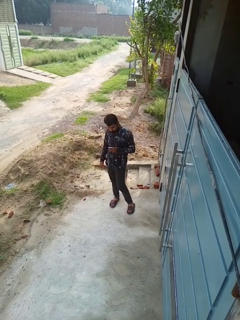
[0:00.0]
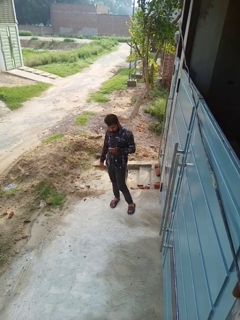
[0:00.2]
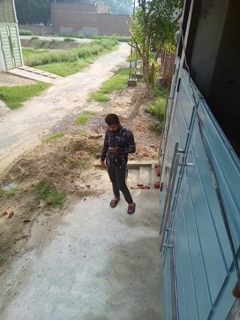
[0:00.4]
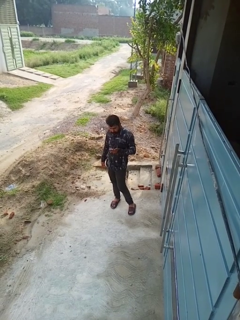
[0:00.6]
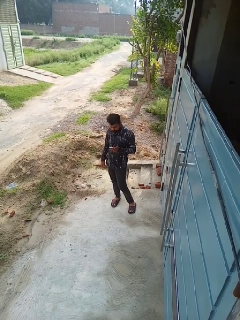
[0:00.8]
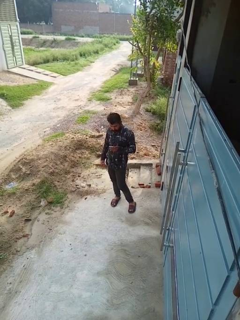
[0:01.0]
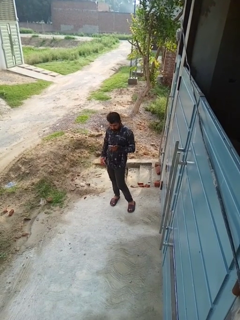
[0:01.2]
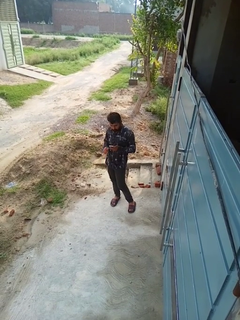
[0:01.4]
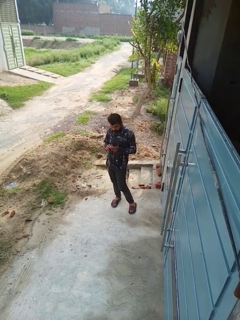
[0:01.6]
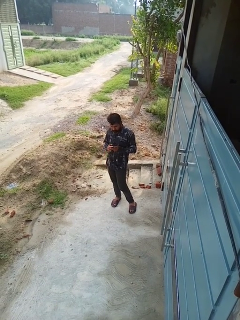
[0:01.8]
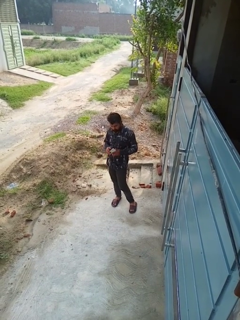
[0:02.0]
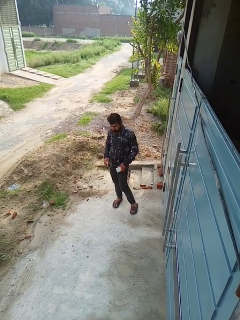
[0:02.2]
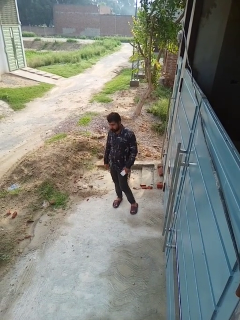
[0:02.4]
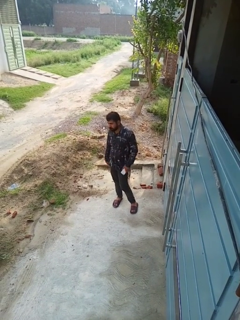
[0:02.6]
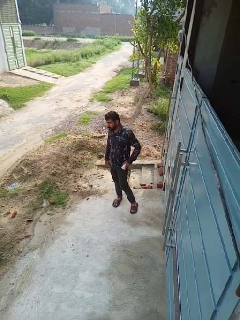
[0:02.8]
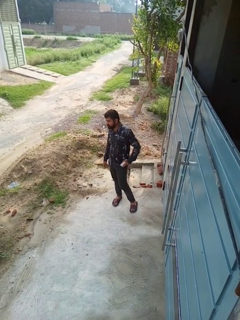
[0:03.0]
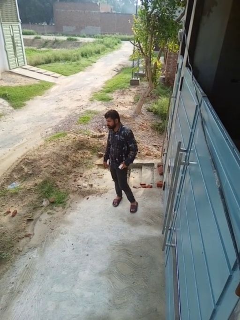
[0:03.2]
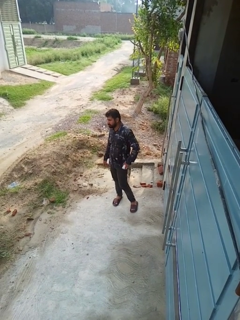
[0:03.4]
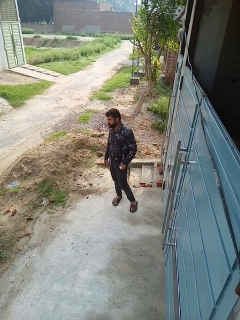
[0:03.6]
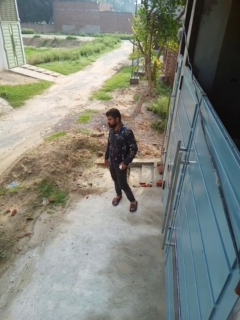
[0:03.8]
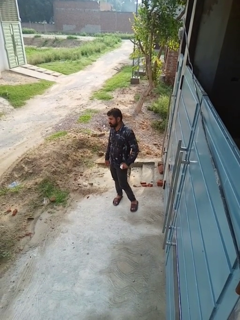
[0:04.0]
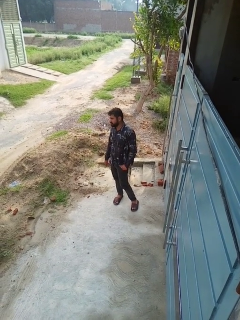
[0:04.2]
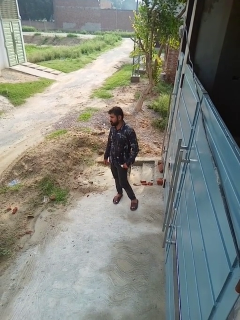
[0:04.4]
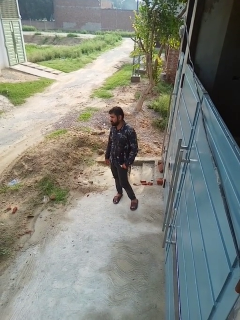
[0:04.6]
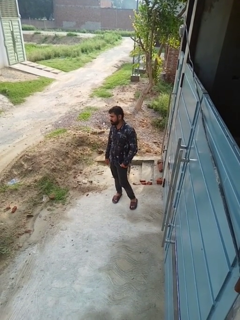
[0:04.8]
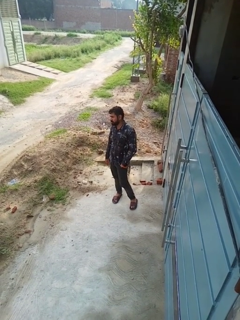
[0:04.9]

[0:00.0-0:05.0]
person puts phone into pocket

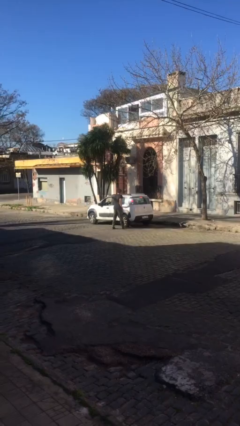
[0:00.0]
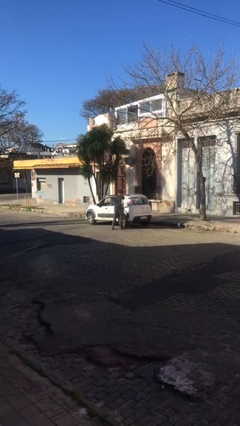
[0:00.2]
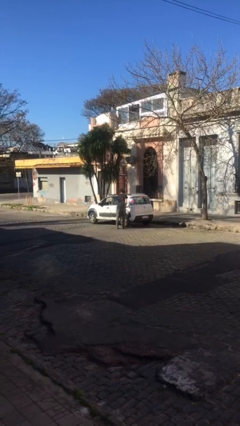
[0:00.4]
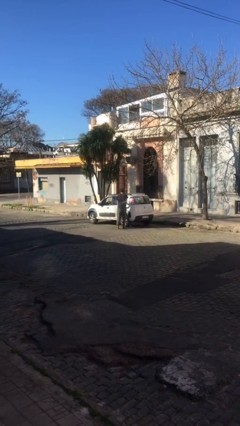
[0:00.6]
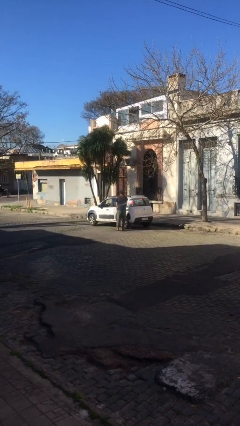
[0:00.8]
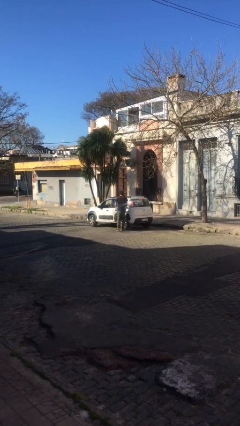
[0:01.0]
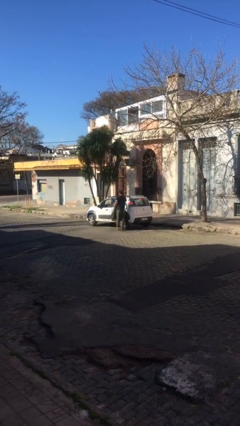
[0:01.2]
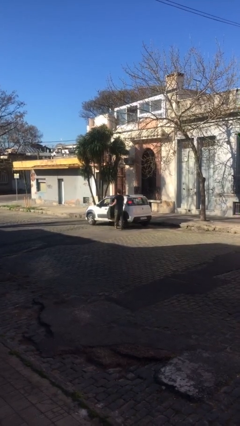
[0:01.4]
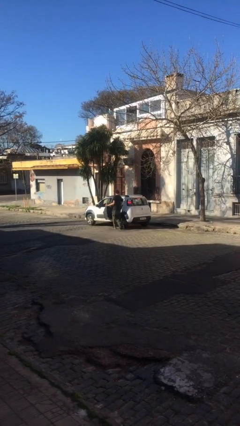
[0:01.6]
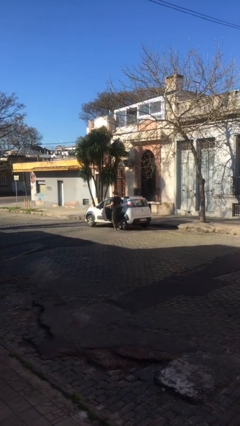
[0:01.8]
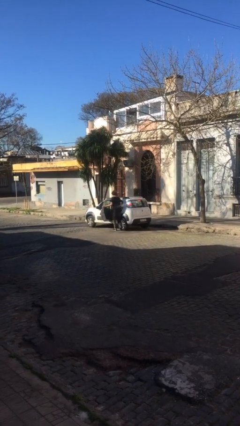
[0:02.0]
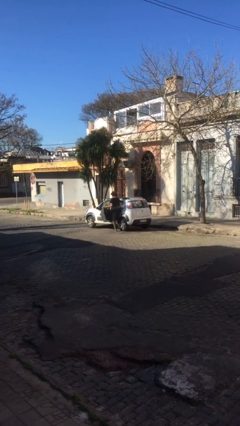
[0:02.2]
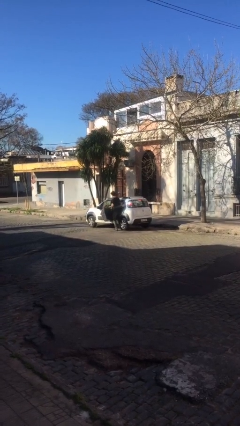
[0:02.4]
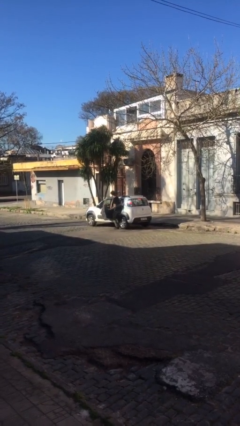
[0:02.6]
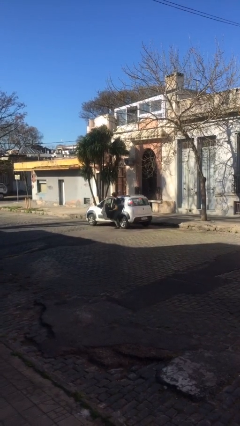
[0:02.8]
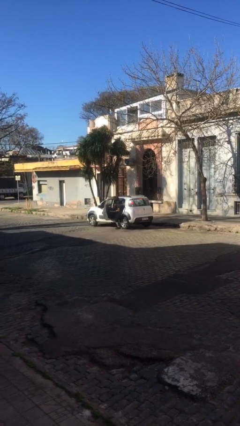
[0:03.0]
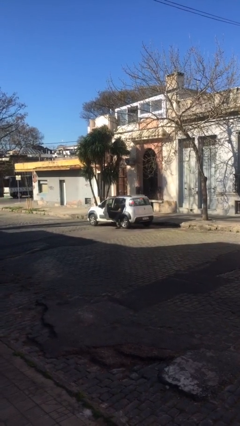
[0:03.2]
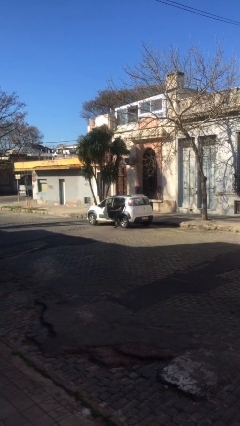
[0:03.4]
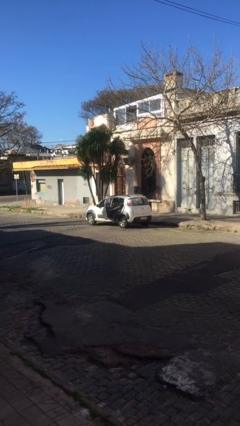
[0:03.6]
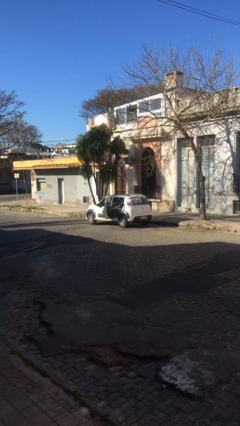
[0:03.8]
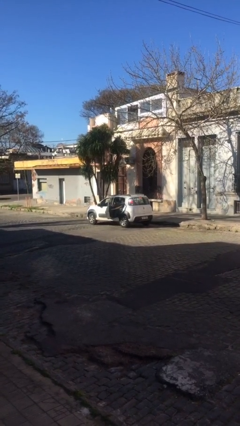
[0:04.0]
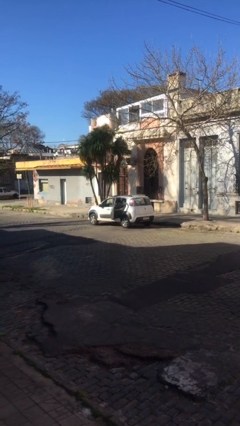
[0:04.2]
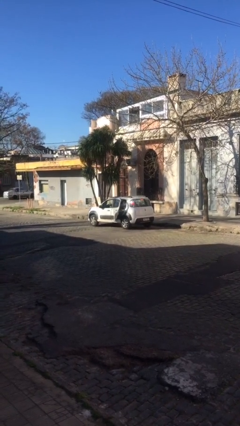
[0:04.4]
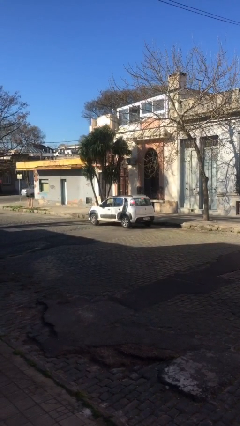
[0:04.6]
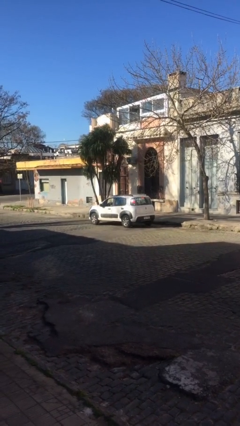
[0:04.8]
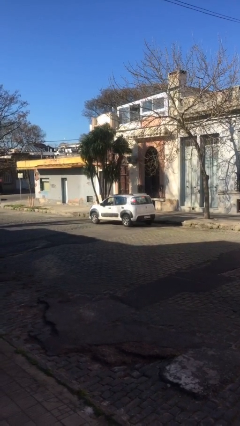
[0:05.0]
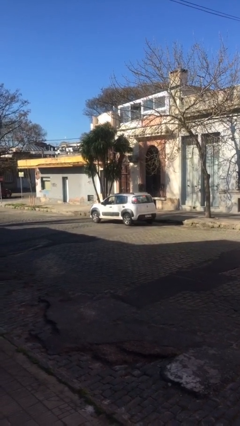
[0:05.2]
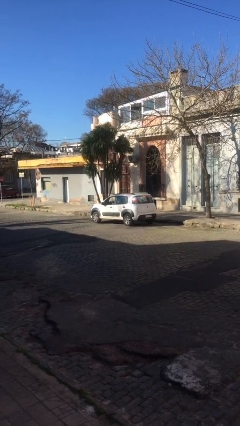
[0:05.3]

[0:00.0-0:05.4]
car picks up person

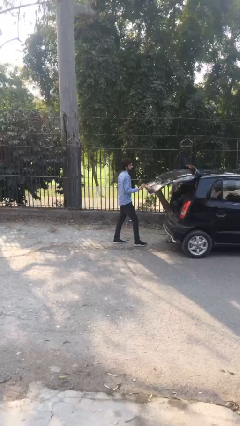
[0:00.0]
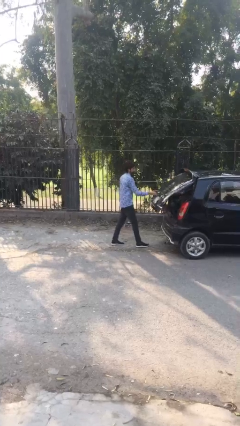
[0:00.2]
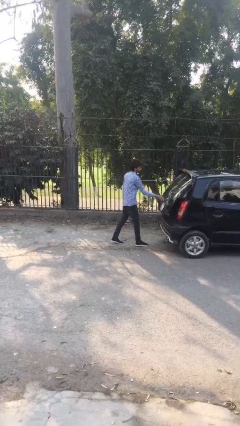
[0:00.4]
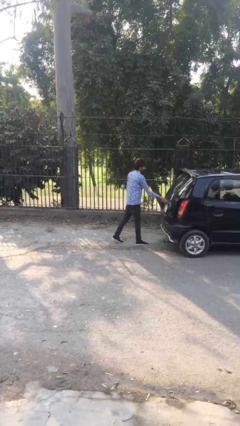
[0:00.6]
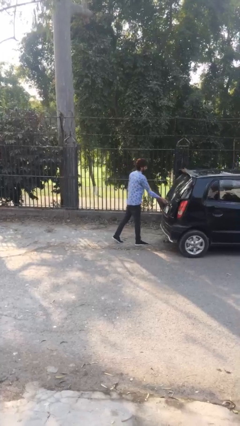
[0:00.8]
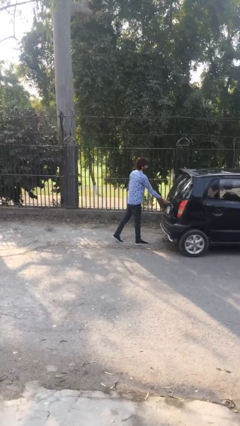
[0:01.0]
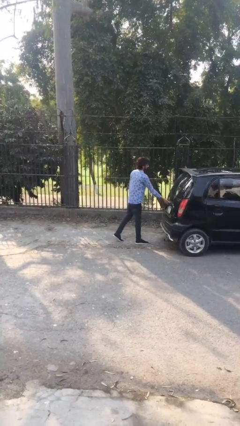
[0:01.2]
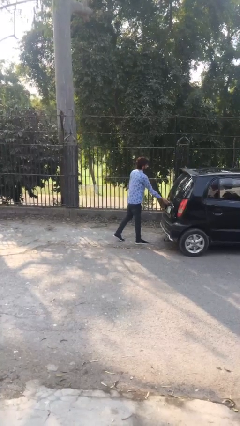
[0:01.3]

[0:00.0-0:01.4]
person closes car trunk

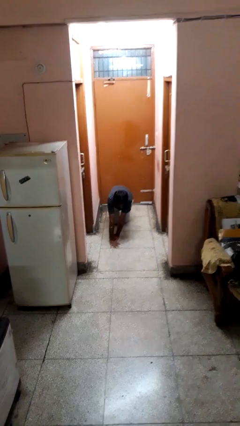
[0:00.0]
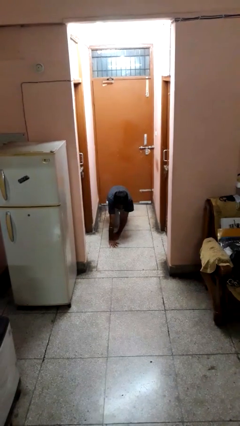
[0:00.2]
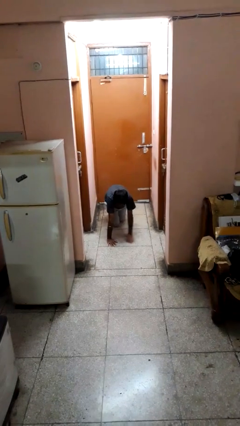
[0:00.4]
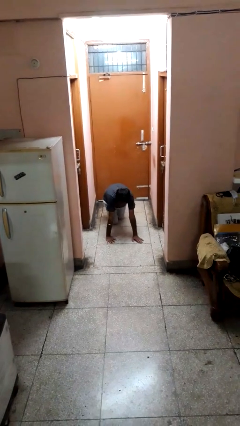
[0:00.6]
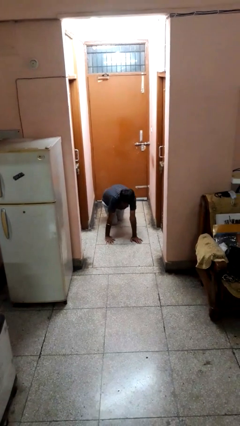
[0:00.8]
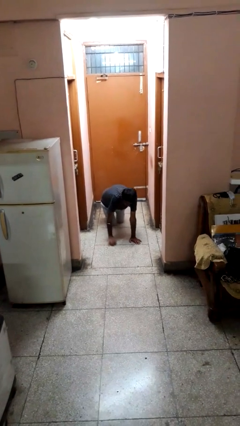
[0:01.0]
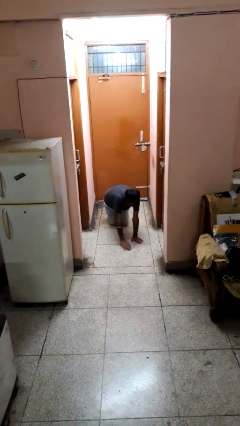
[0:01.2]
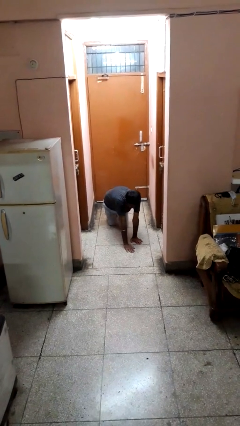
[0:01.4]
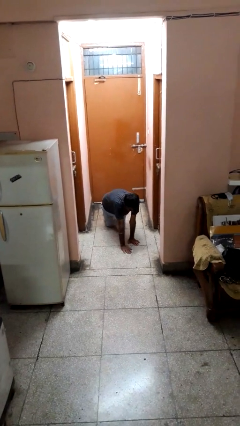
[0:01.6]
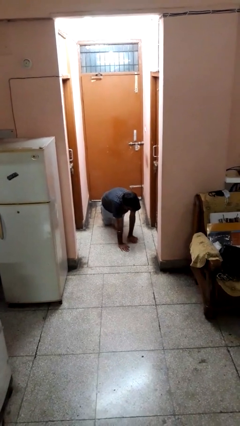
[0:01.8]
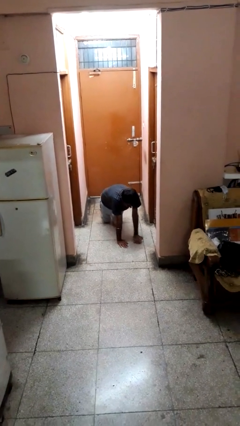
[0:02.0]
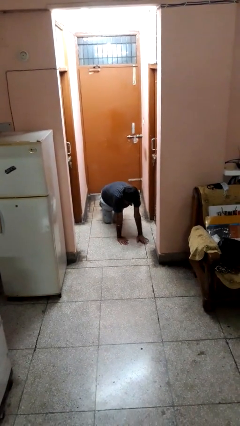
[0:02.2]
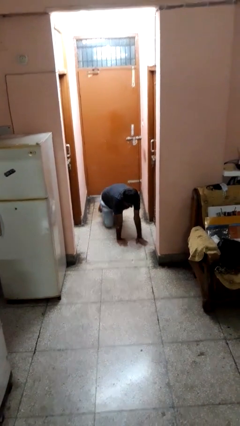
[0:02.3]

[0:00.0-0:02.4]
person crawls

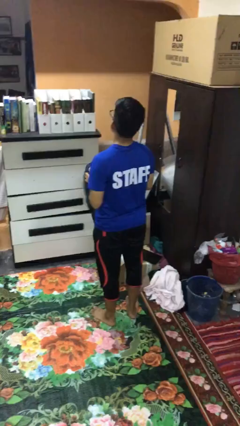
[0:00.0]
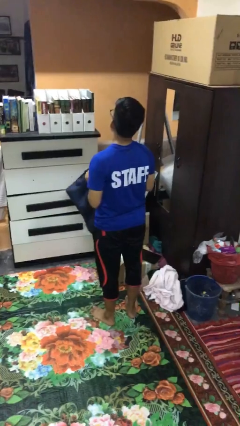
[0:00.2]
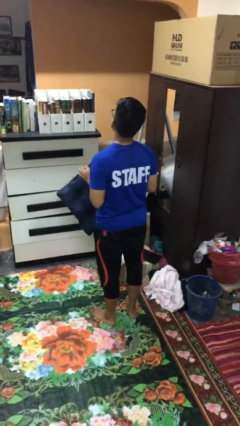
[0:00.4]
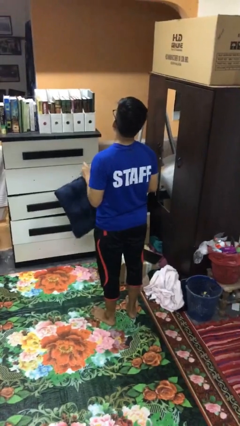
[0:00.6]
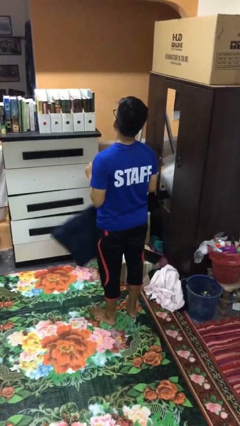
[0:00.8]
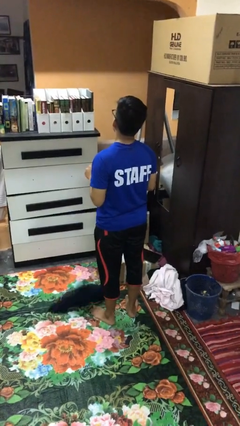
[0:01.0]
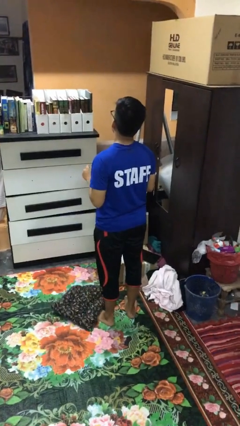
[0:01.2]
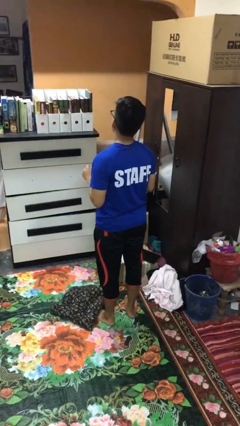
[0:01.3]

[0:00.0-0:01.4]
person drops object

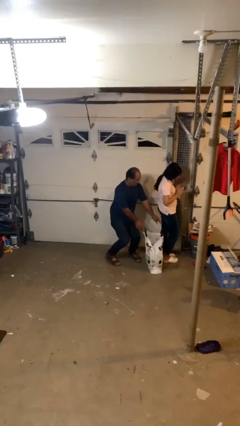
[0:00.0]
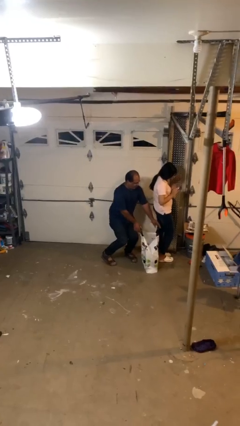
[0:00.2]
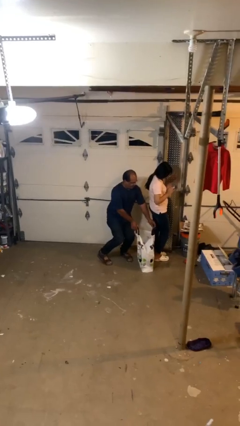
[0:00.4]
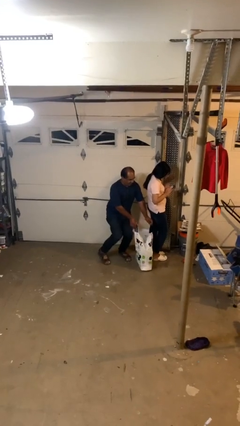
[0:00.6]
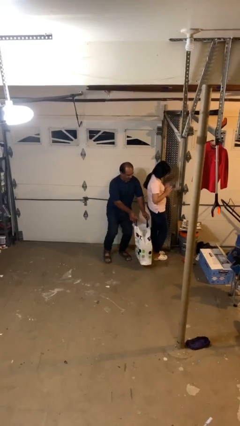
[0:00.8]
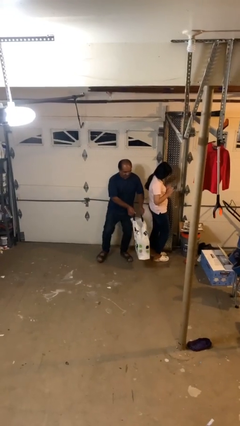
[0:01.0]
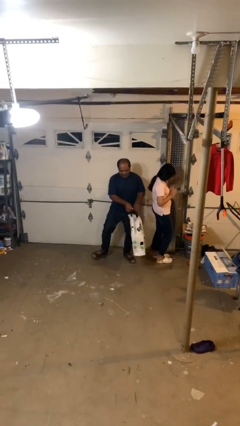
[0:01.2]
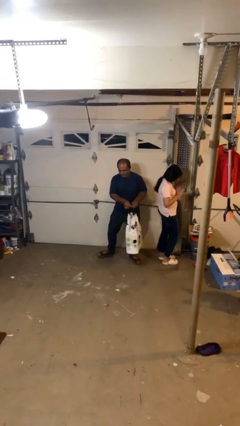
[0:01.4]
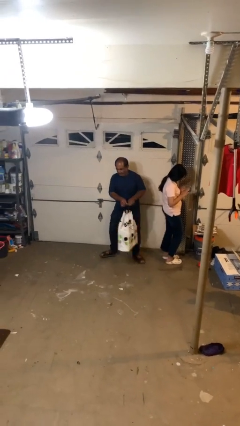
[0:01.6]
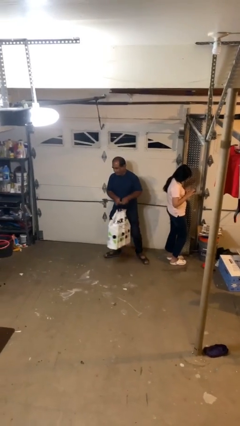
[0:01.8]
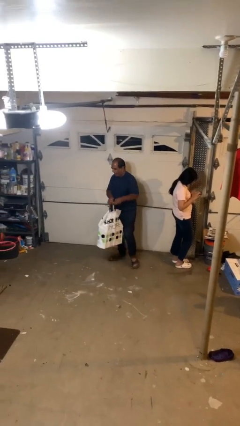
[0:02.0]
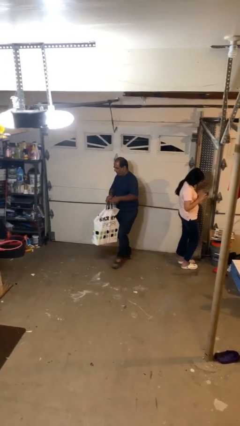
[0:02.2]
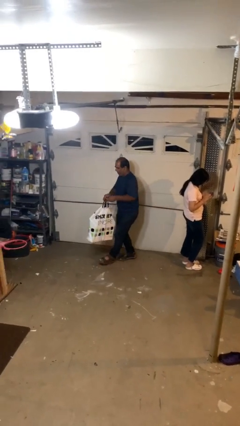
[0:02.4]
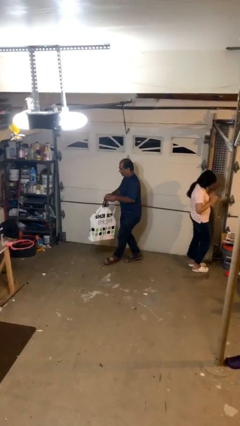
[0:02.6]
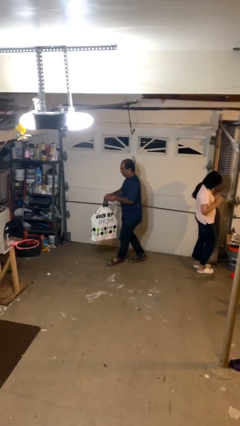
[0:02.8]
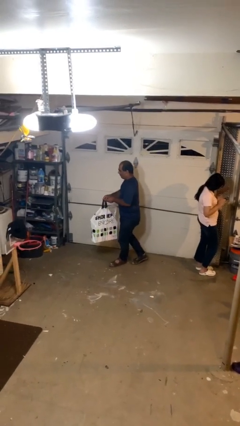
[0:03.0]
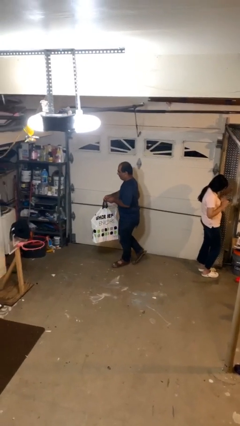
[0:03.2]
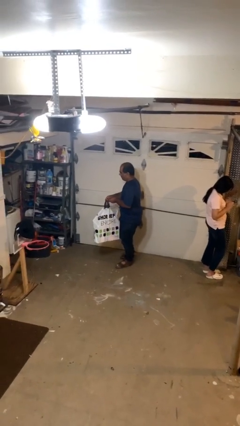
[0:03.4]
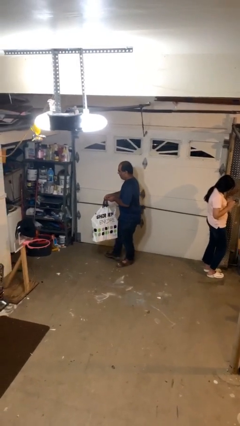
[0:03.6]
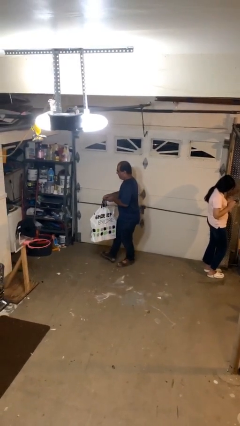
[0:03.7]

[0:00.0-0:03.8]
person steals object from person
